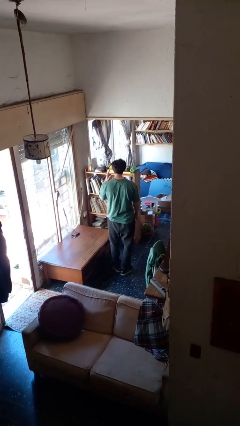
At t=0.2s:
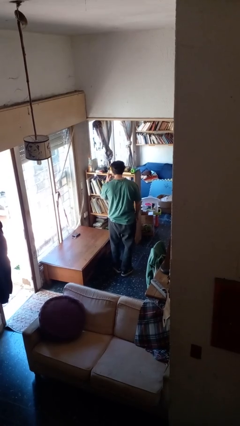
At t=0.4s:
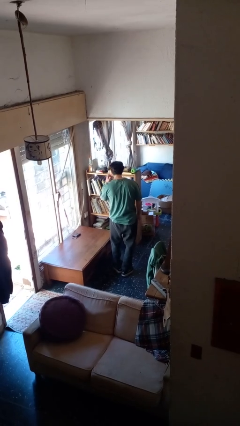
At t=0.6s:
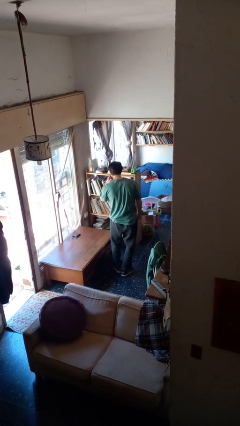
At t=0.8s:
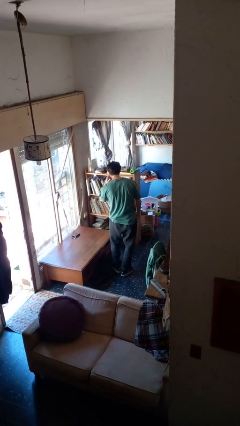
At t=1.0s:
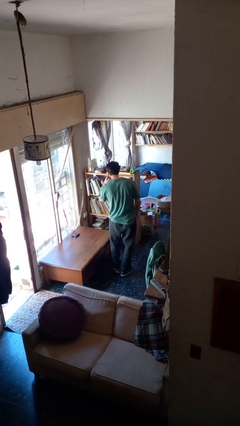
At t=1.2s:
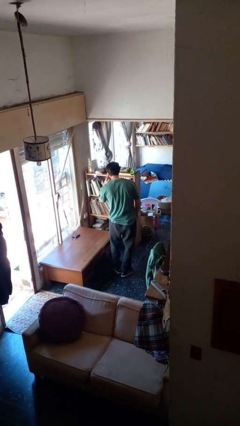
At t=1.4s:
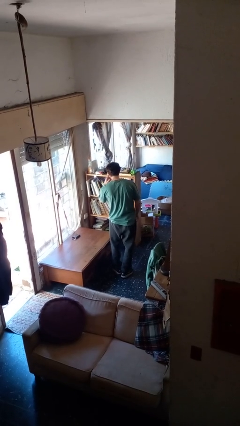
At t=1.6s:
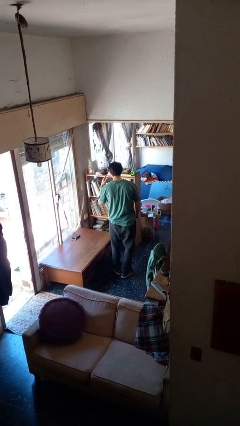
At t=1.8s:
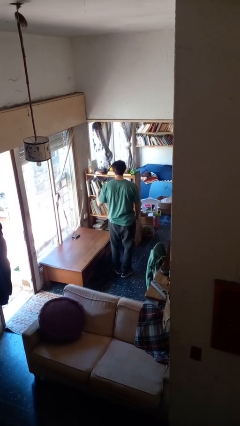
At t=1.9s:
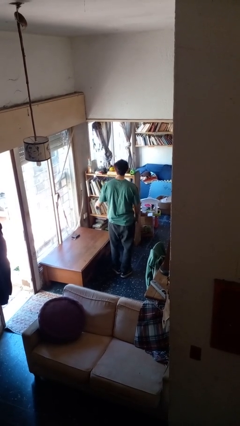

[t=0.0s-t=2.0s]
person gestures listen closely

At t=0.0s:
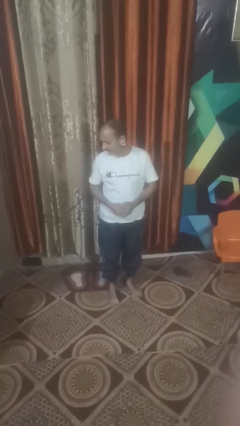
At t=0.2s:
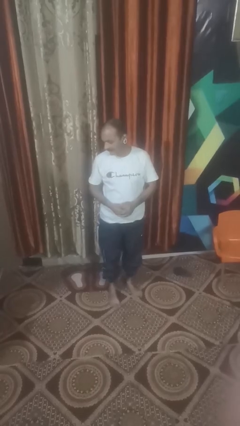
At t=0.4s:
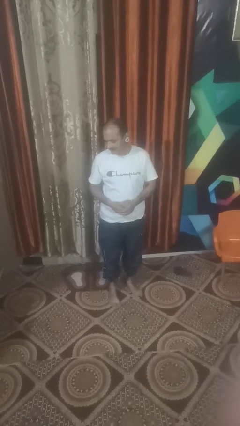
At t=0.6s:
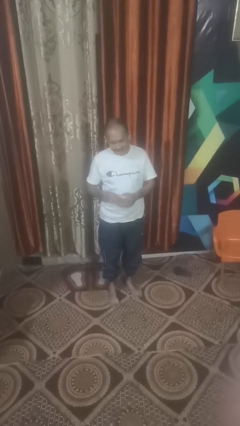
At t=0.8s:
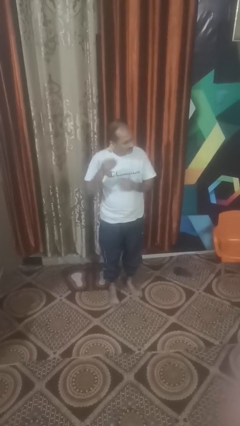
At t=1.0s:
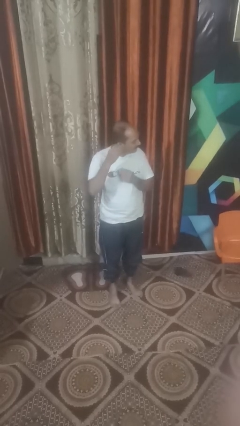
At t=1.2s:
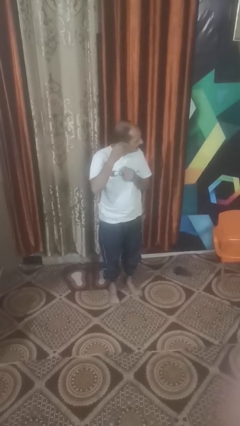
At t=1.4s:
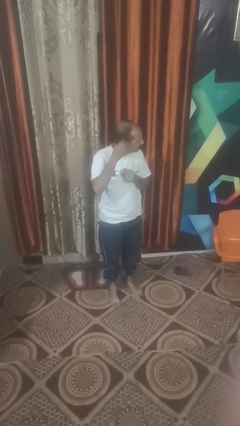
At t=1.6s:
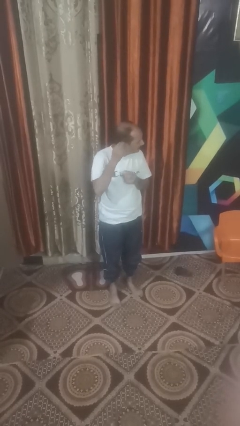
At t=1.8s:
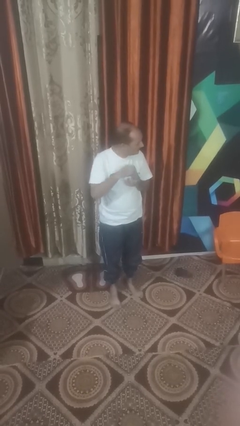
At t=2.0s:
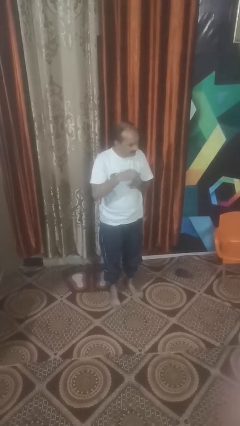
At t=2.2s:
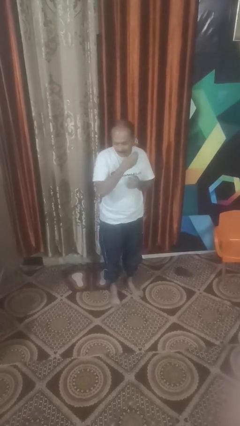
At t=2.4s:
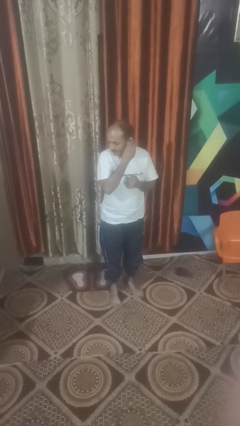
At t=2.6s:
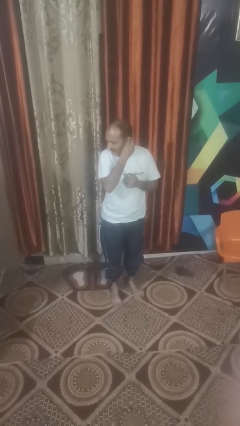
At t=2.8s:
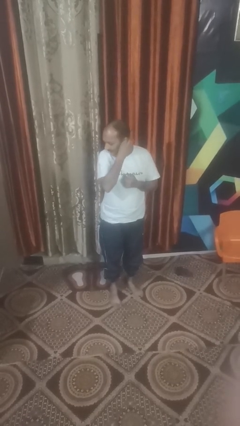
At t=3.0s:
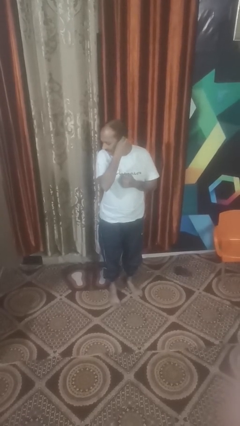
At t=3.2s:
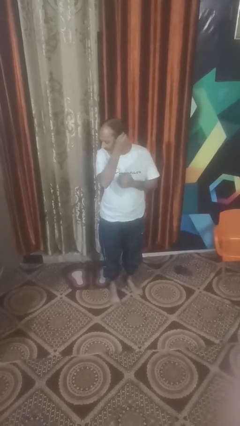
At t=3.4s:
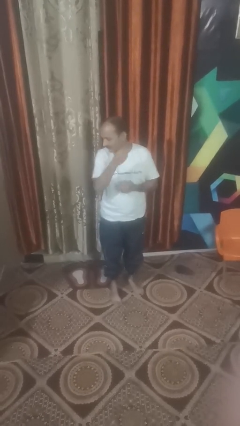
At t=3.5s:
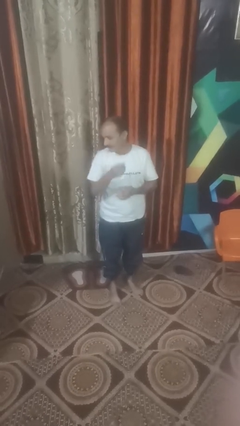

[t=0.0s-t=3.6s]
person takes off earrings

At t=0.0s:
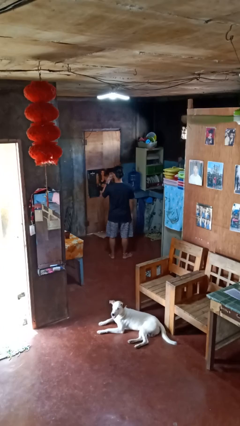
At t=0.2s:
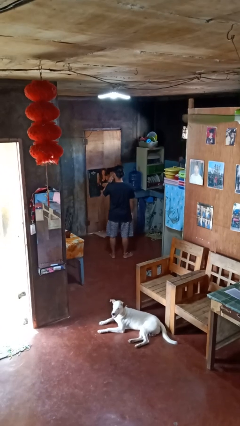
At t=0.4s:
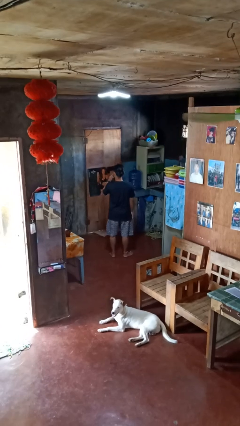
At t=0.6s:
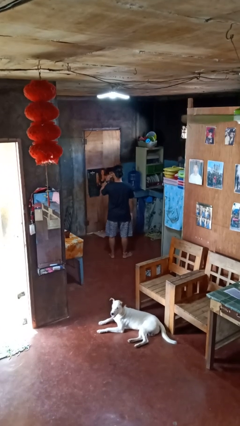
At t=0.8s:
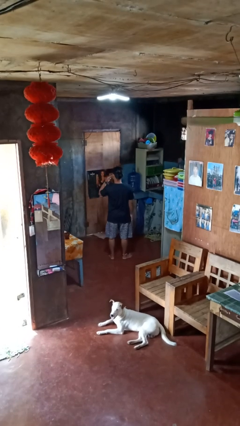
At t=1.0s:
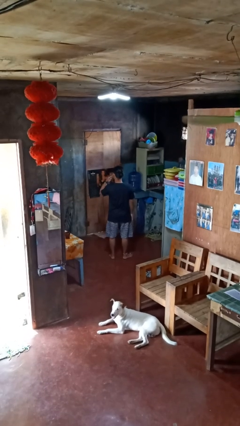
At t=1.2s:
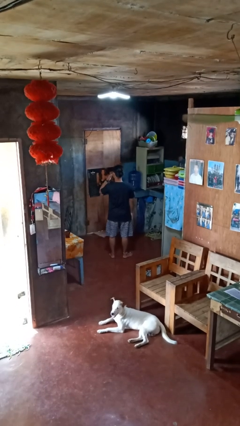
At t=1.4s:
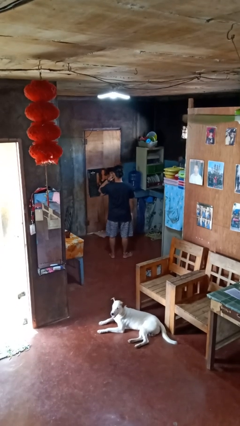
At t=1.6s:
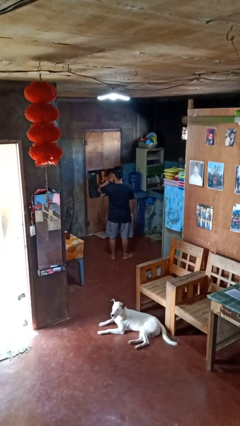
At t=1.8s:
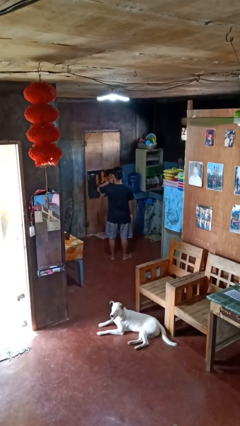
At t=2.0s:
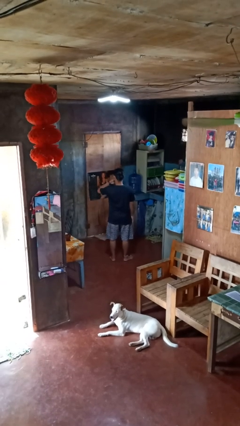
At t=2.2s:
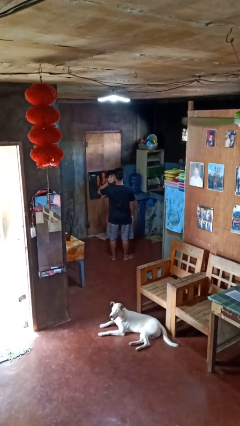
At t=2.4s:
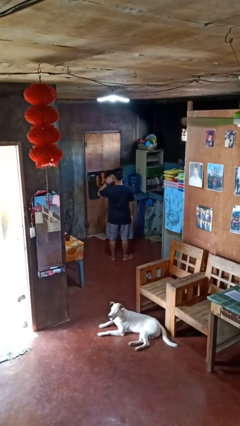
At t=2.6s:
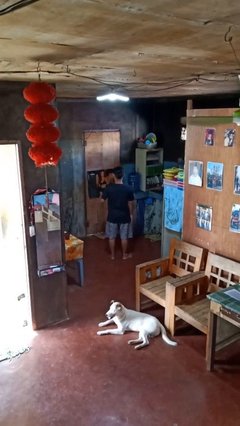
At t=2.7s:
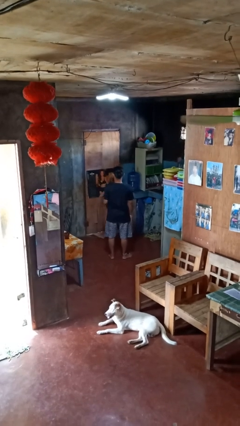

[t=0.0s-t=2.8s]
person licks fingers

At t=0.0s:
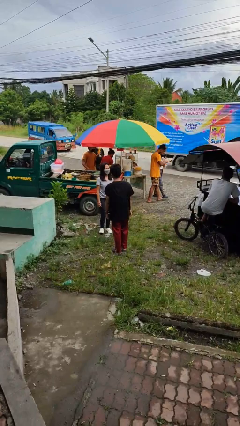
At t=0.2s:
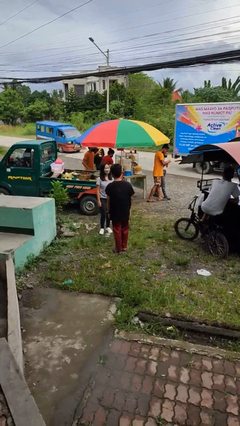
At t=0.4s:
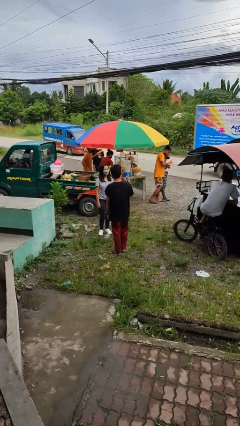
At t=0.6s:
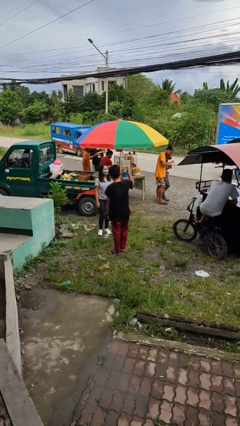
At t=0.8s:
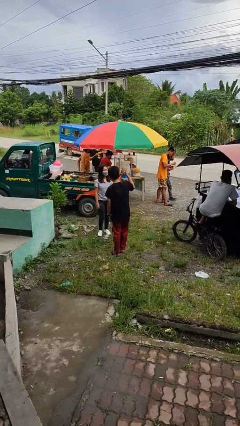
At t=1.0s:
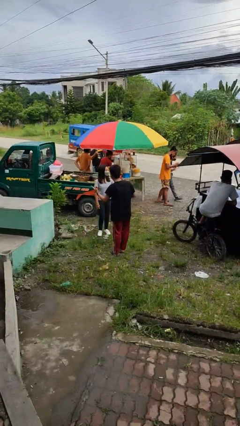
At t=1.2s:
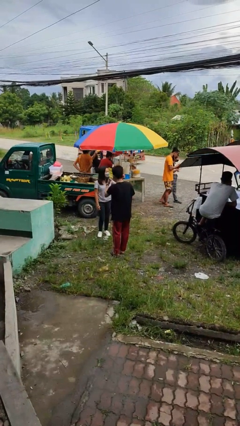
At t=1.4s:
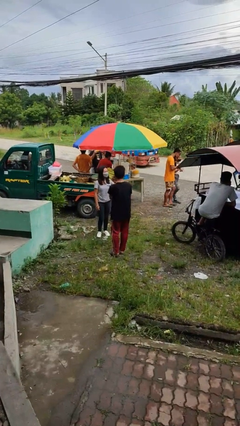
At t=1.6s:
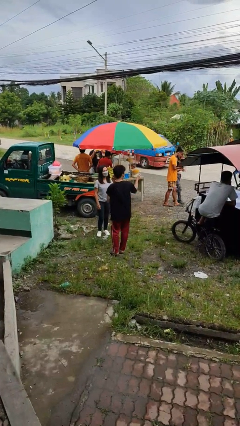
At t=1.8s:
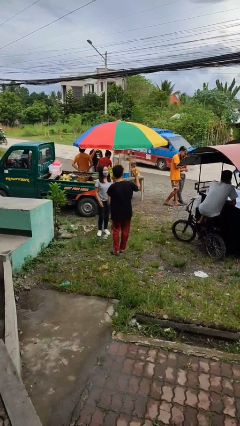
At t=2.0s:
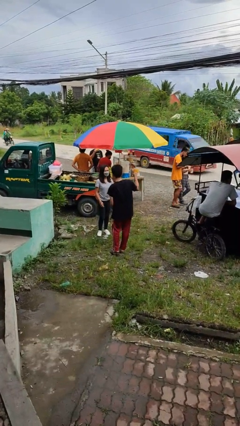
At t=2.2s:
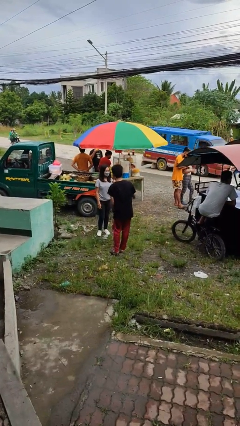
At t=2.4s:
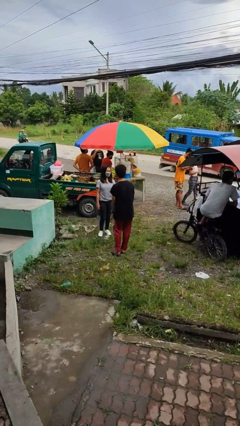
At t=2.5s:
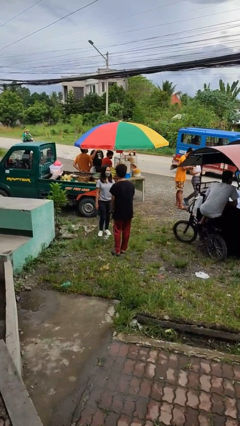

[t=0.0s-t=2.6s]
person talks to person

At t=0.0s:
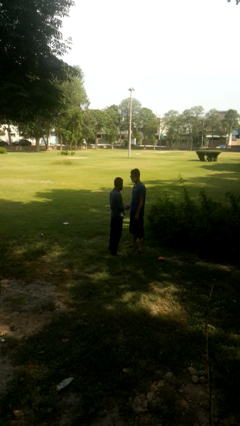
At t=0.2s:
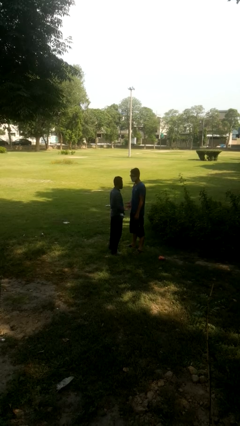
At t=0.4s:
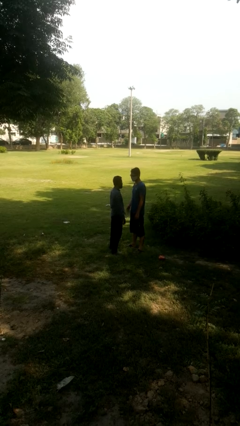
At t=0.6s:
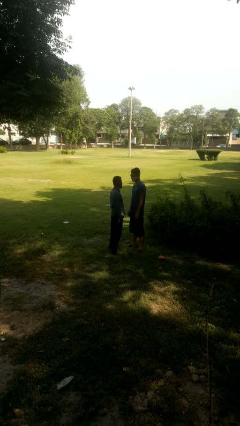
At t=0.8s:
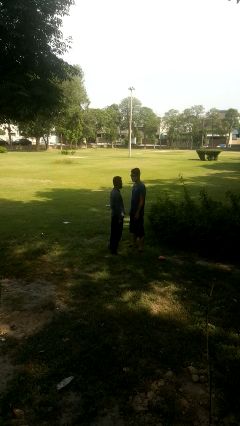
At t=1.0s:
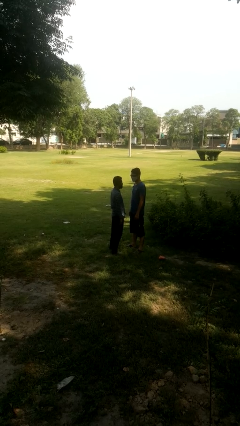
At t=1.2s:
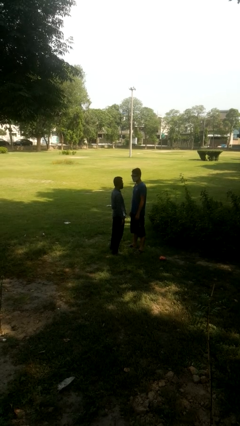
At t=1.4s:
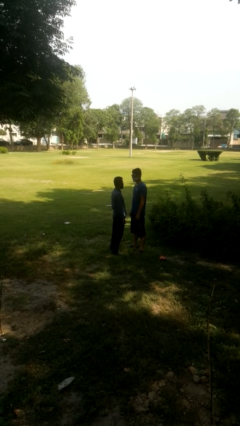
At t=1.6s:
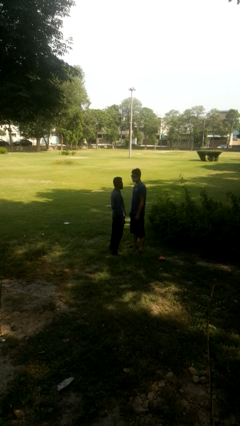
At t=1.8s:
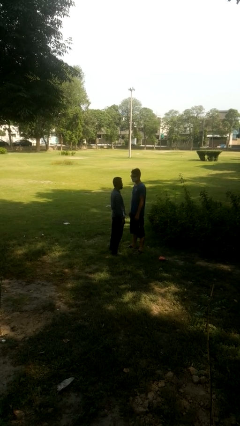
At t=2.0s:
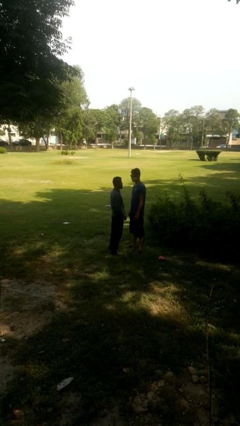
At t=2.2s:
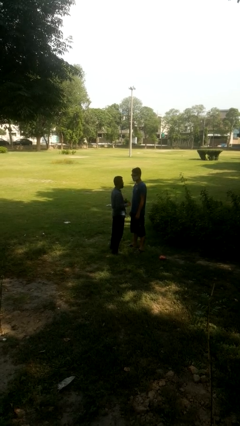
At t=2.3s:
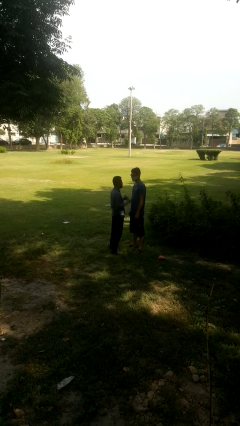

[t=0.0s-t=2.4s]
person highfives hand

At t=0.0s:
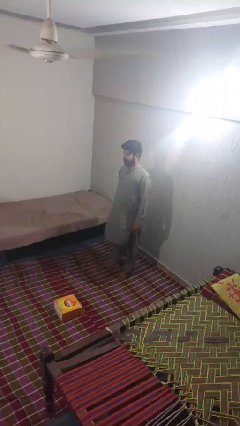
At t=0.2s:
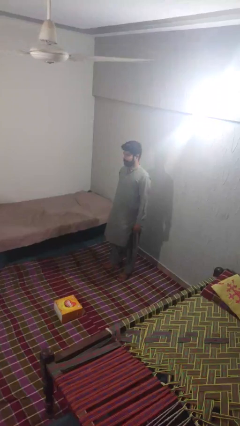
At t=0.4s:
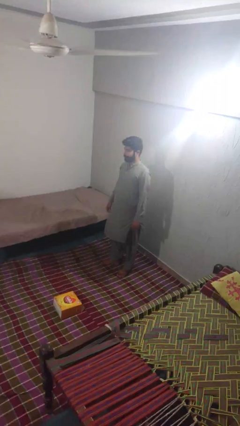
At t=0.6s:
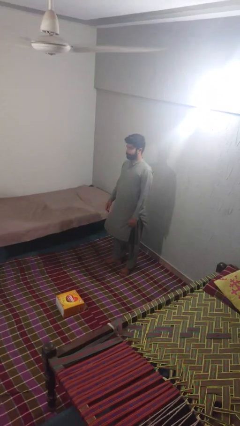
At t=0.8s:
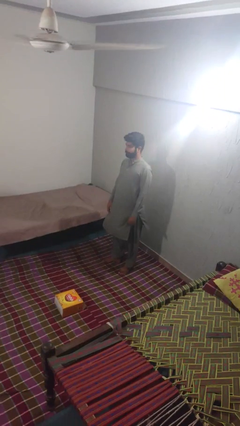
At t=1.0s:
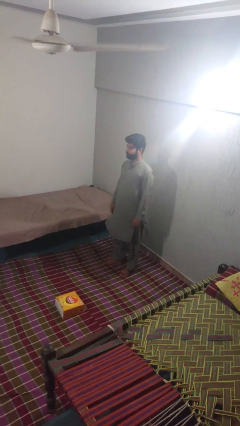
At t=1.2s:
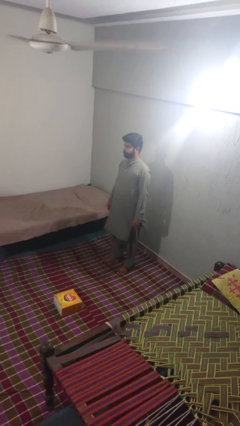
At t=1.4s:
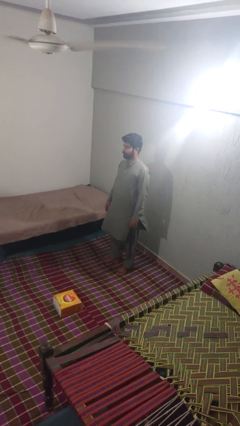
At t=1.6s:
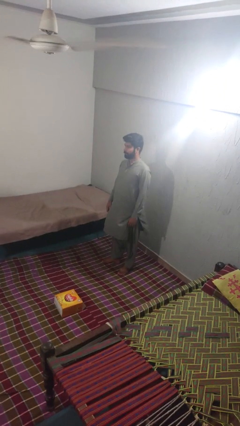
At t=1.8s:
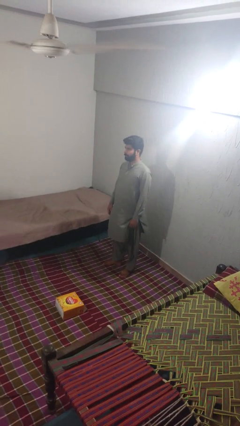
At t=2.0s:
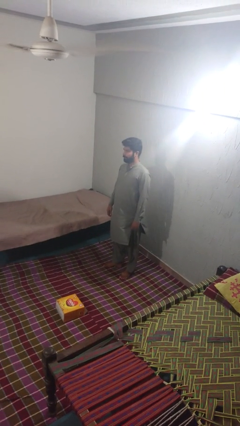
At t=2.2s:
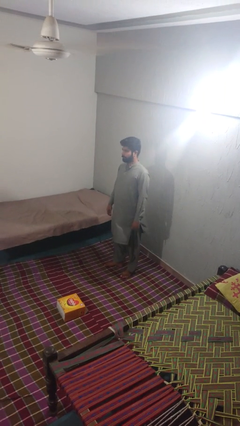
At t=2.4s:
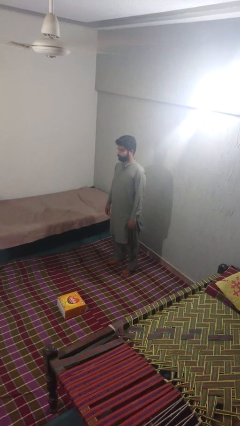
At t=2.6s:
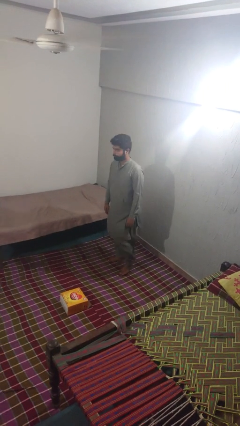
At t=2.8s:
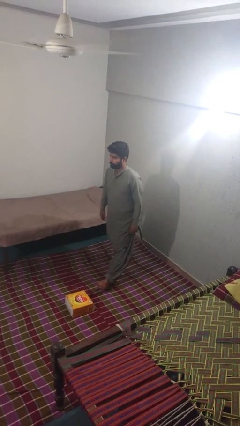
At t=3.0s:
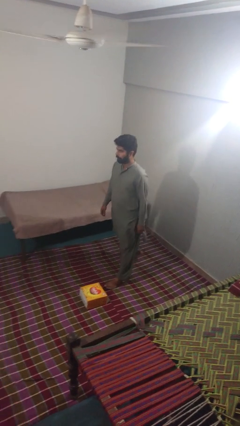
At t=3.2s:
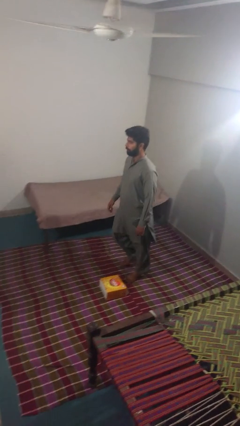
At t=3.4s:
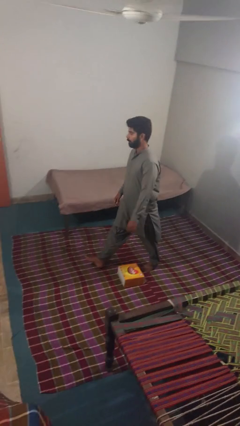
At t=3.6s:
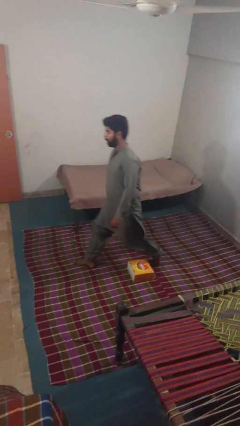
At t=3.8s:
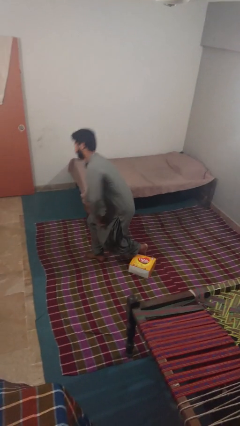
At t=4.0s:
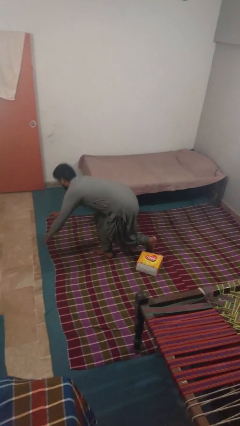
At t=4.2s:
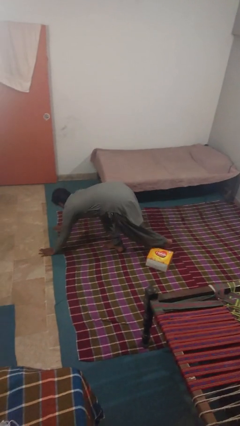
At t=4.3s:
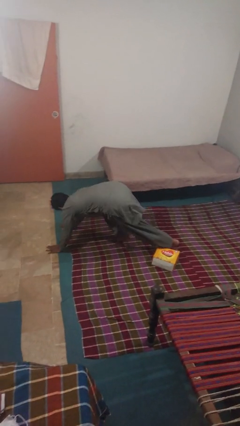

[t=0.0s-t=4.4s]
person trips on object on floor
